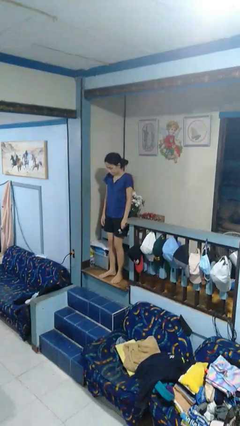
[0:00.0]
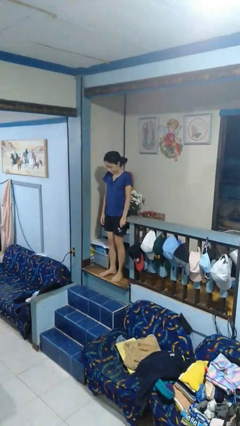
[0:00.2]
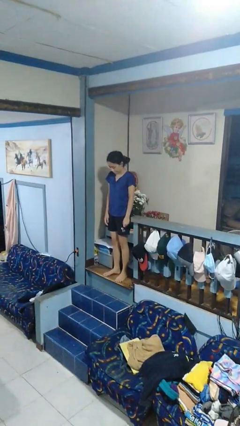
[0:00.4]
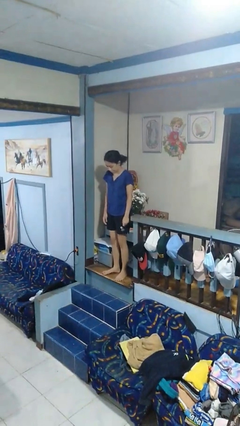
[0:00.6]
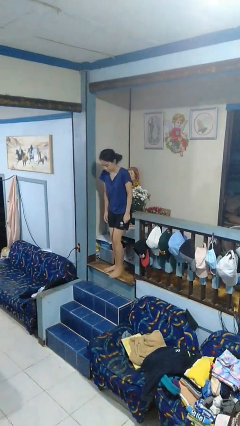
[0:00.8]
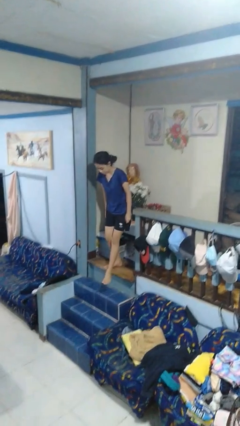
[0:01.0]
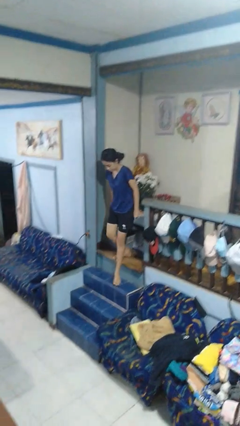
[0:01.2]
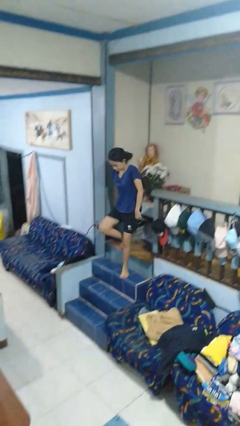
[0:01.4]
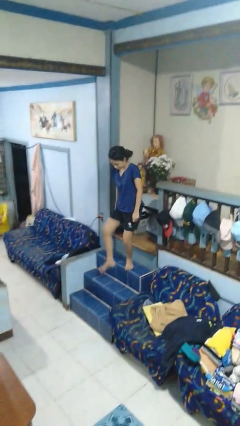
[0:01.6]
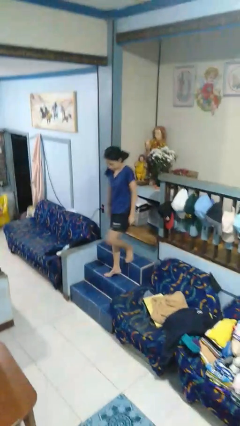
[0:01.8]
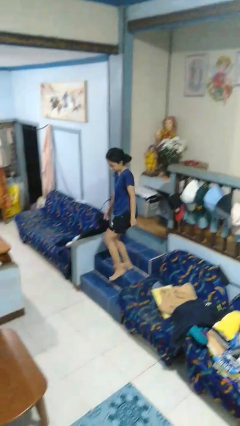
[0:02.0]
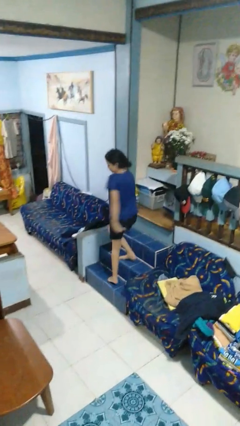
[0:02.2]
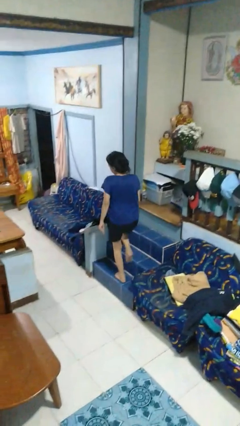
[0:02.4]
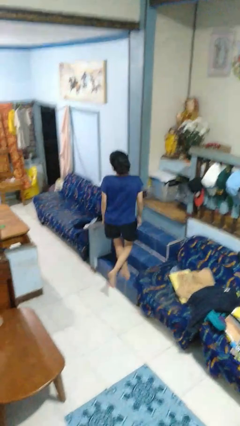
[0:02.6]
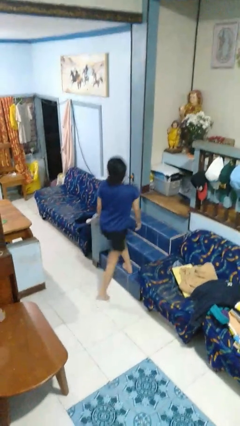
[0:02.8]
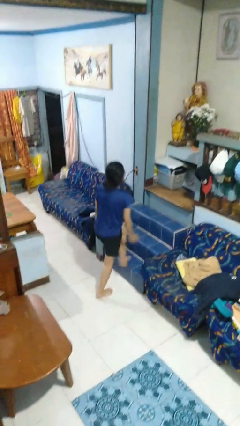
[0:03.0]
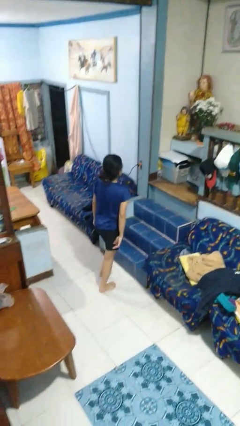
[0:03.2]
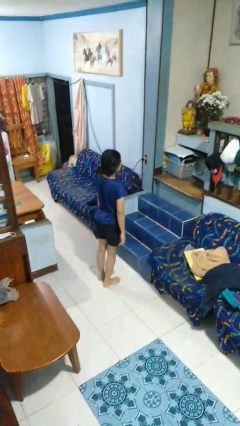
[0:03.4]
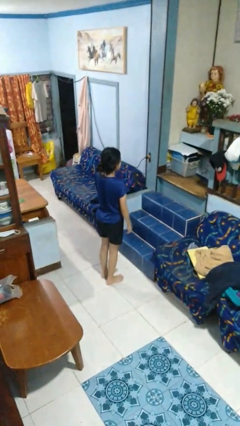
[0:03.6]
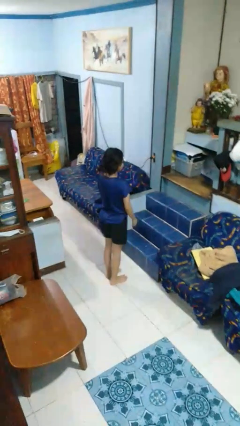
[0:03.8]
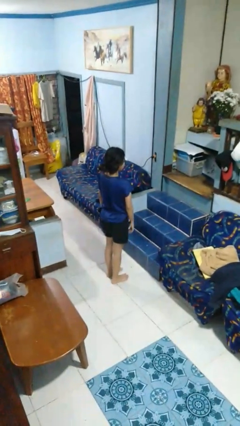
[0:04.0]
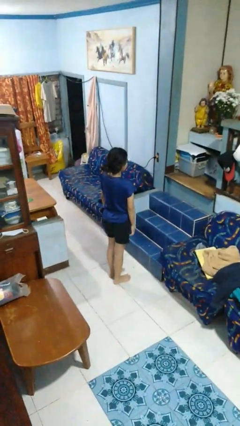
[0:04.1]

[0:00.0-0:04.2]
person climbs down stairs

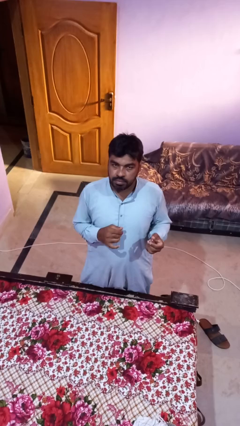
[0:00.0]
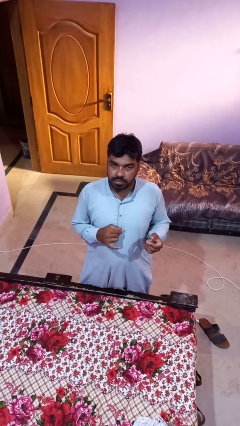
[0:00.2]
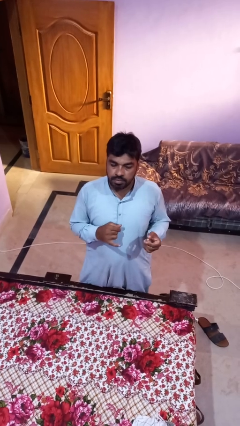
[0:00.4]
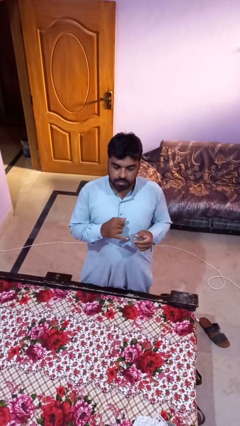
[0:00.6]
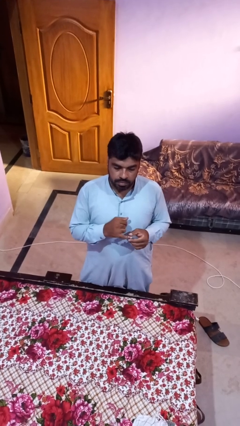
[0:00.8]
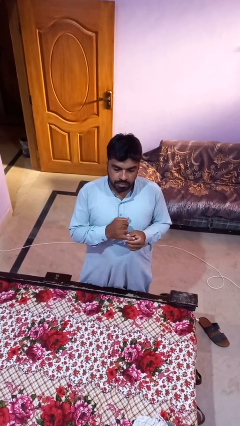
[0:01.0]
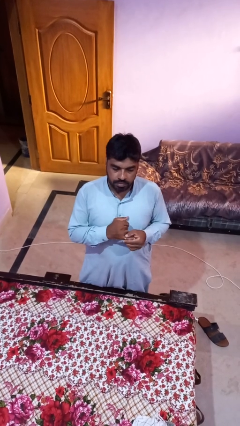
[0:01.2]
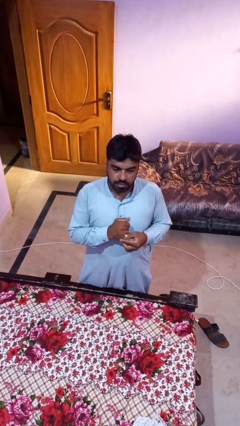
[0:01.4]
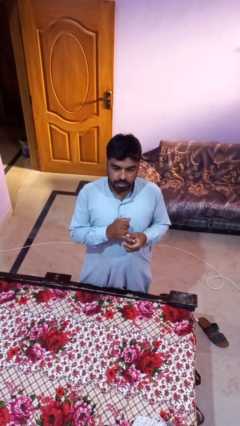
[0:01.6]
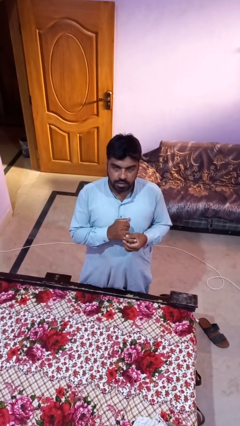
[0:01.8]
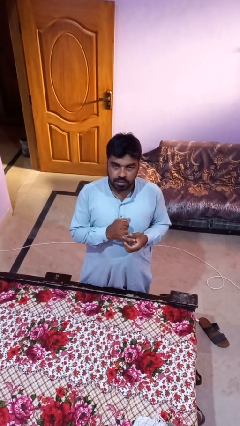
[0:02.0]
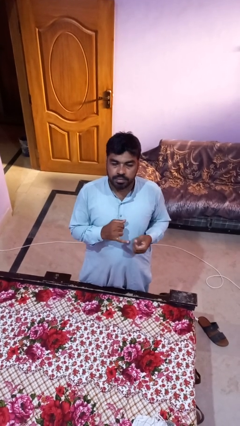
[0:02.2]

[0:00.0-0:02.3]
person puts on ring

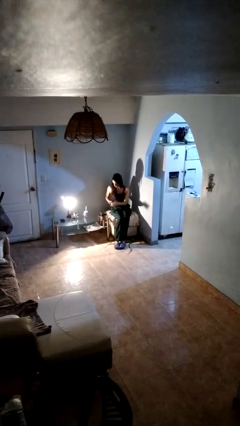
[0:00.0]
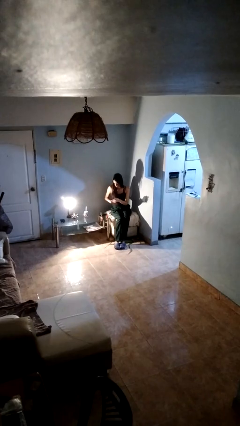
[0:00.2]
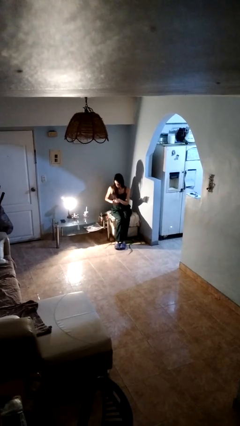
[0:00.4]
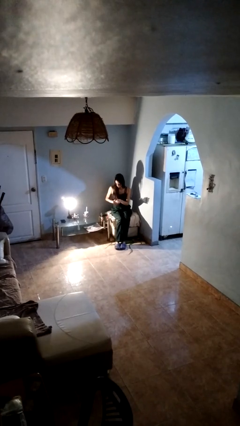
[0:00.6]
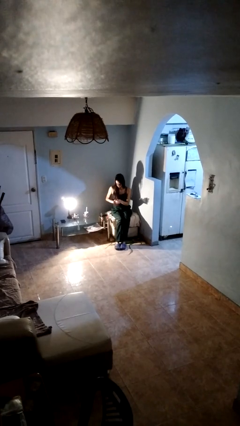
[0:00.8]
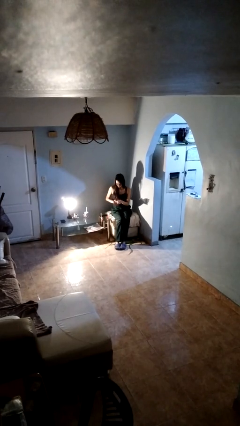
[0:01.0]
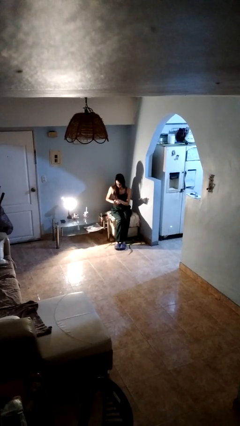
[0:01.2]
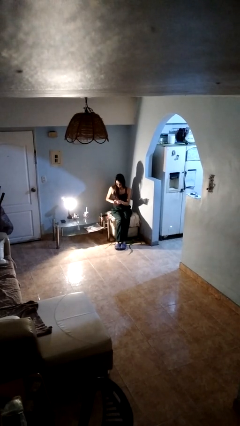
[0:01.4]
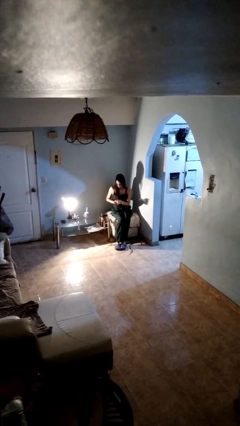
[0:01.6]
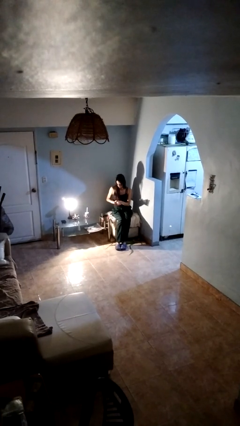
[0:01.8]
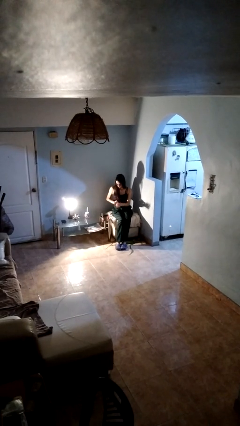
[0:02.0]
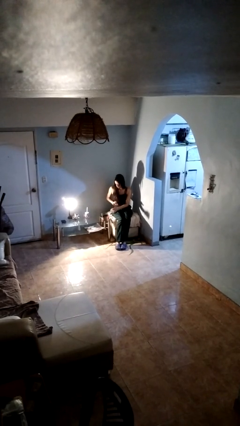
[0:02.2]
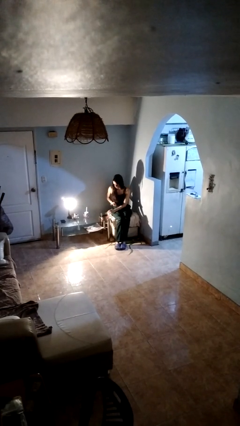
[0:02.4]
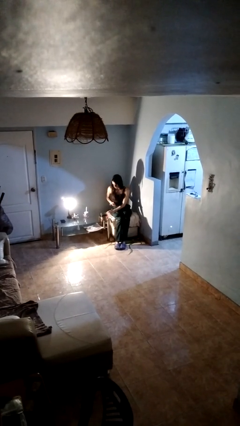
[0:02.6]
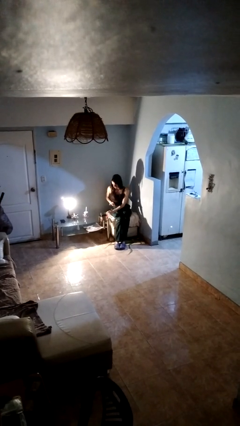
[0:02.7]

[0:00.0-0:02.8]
person paints fingernails

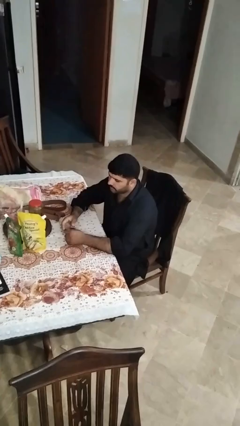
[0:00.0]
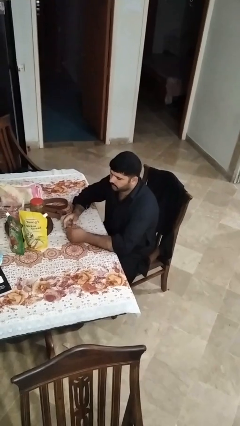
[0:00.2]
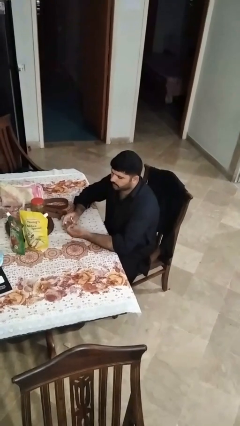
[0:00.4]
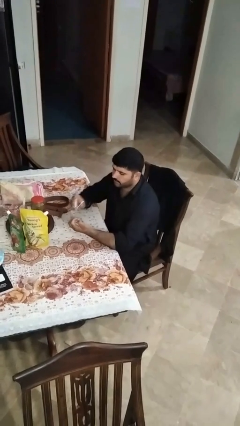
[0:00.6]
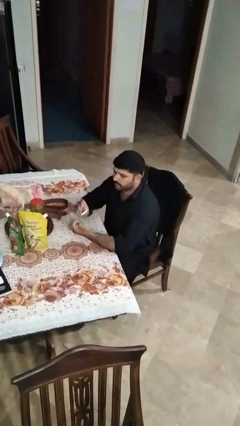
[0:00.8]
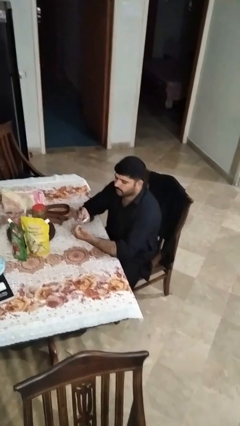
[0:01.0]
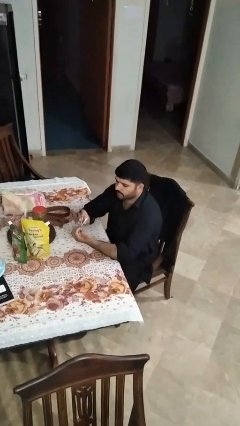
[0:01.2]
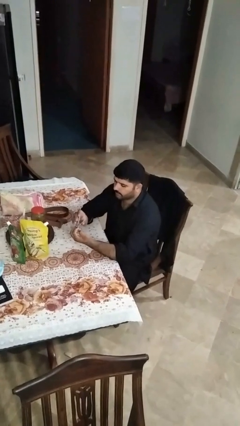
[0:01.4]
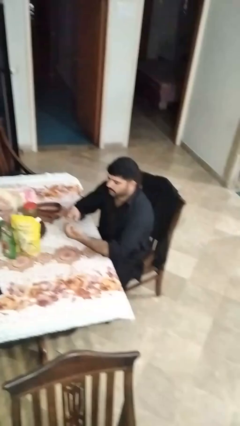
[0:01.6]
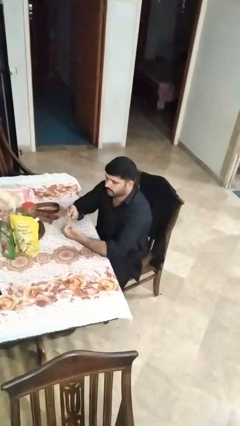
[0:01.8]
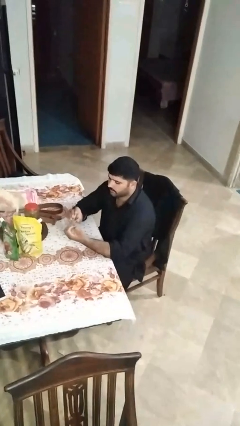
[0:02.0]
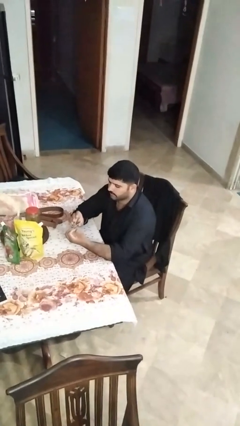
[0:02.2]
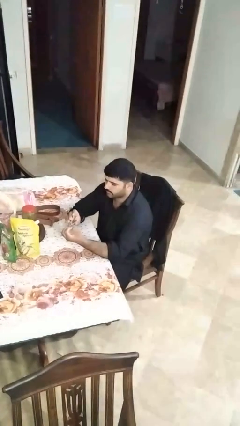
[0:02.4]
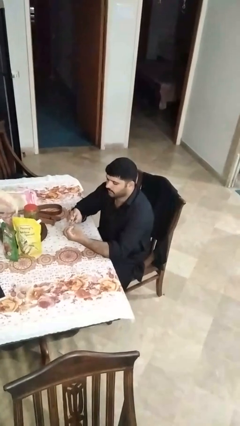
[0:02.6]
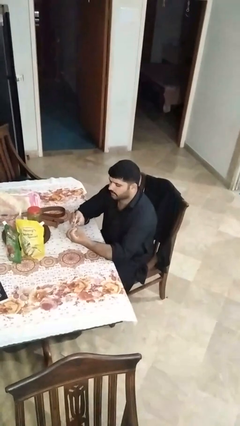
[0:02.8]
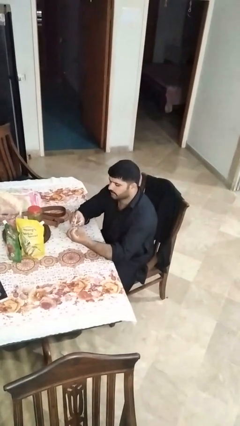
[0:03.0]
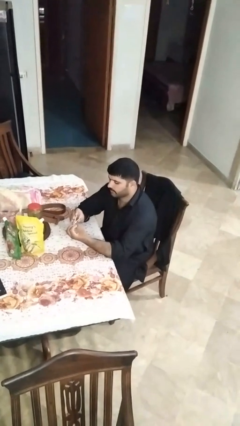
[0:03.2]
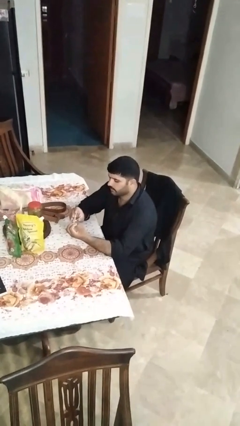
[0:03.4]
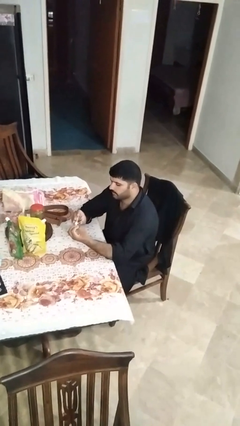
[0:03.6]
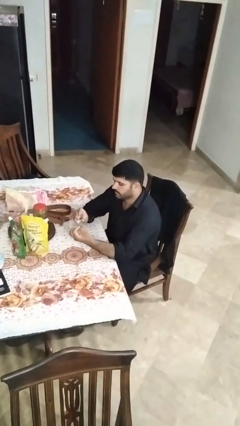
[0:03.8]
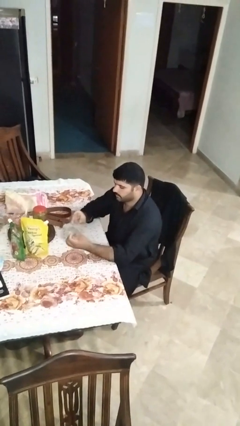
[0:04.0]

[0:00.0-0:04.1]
person clips fingernails

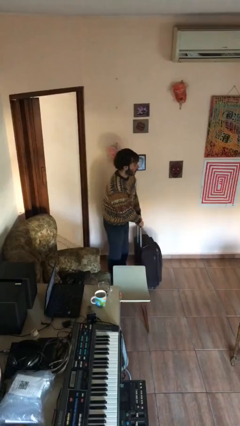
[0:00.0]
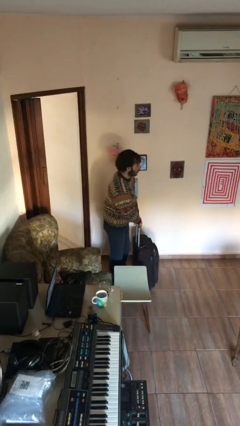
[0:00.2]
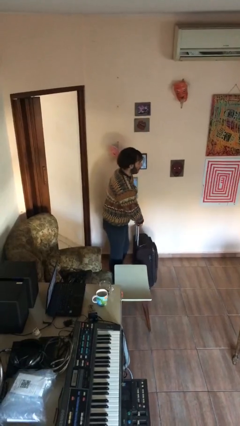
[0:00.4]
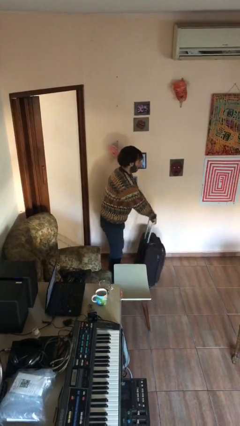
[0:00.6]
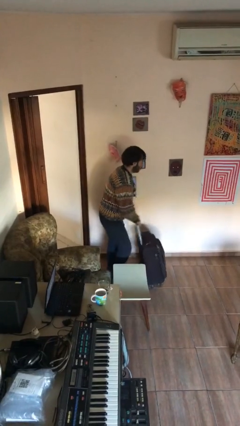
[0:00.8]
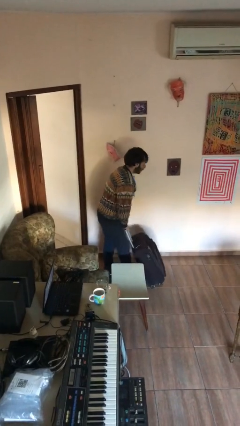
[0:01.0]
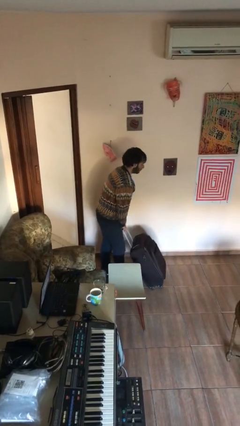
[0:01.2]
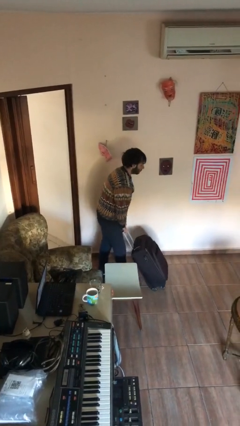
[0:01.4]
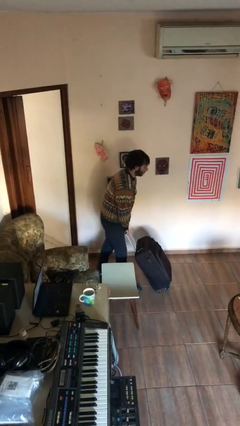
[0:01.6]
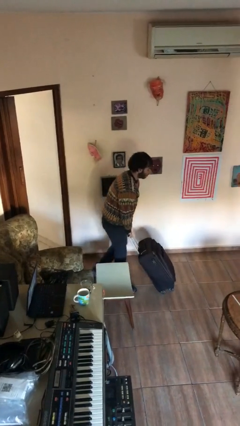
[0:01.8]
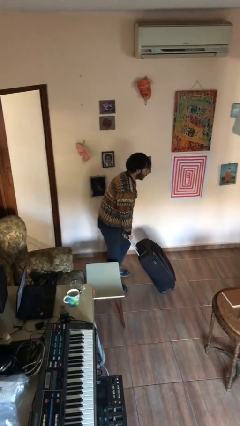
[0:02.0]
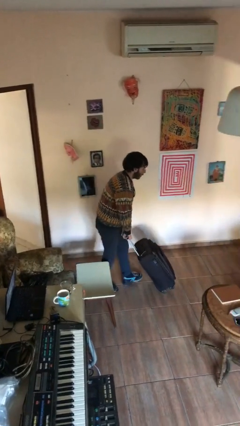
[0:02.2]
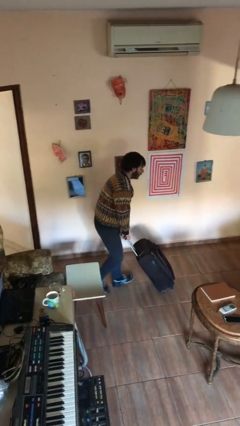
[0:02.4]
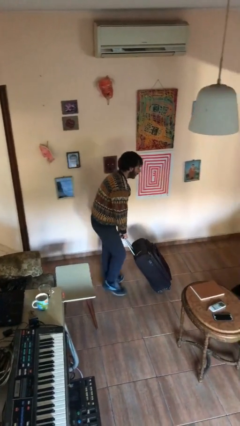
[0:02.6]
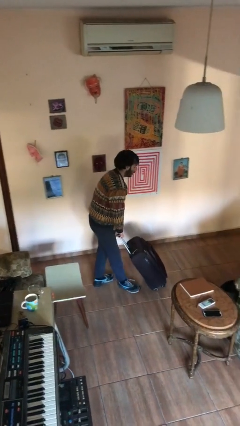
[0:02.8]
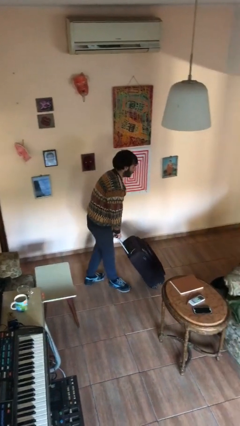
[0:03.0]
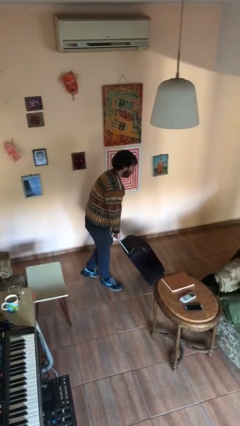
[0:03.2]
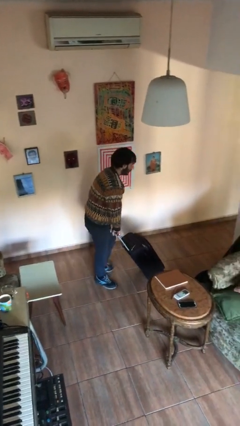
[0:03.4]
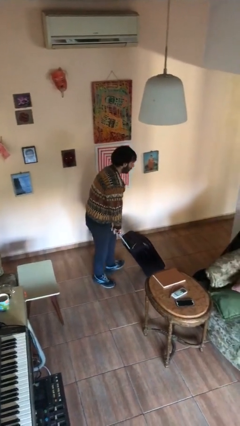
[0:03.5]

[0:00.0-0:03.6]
person pushes wheeled cart

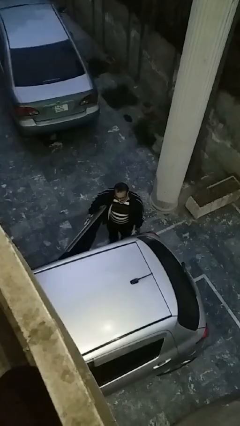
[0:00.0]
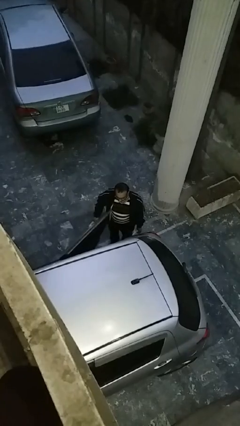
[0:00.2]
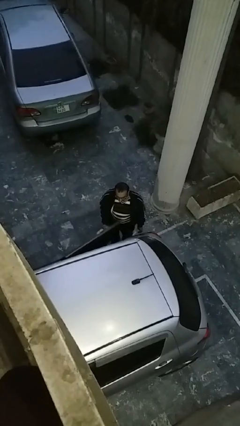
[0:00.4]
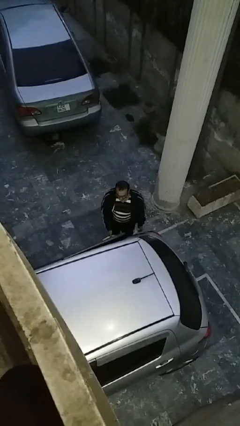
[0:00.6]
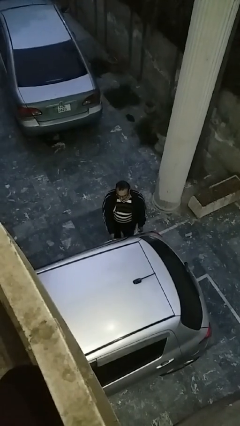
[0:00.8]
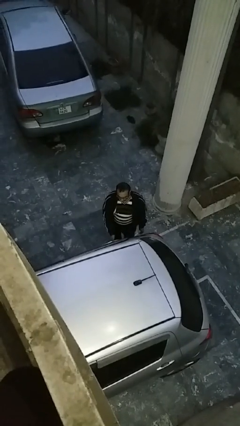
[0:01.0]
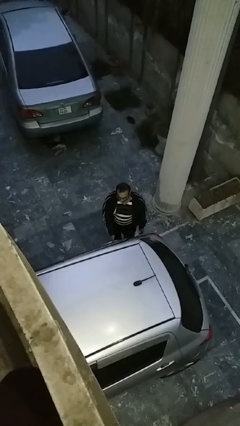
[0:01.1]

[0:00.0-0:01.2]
person closes car door
